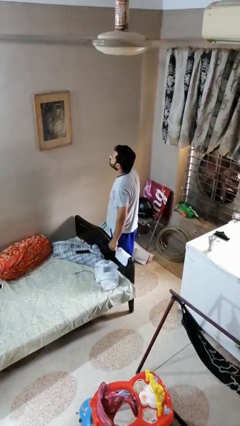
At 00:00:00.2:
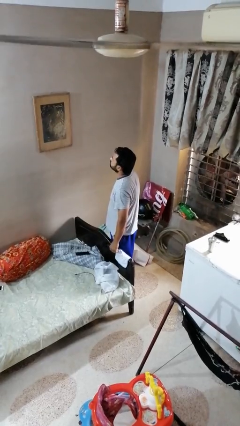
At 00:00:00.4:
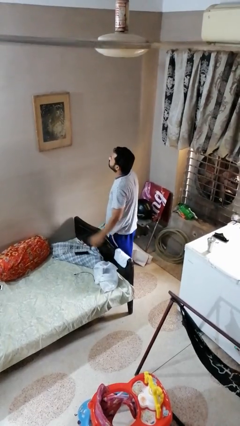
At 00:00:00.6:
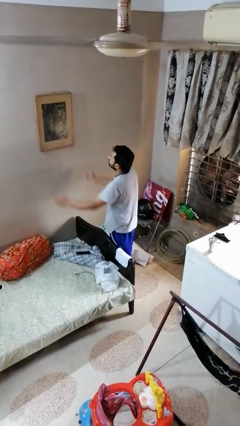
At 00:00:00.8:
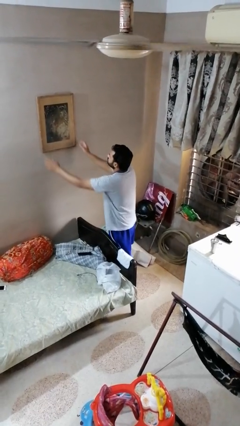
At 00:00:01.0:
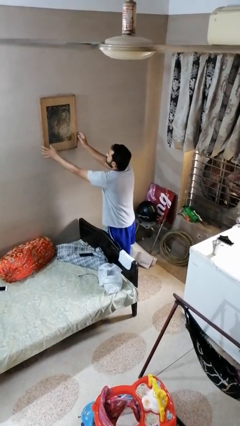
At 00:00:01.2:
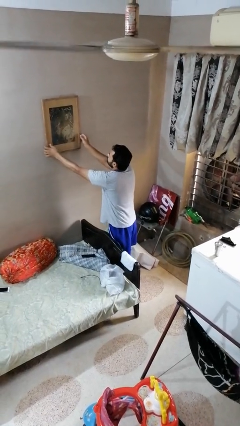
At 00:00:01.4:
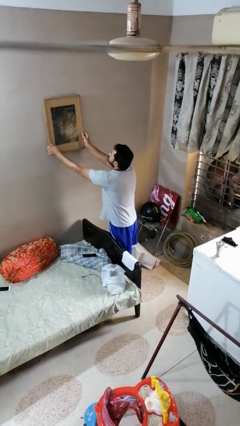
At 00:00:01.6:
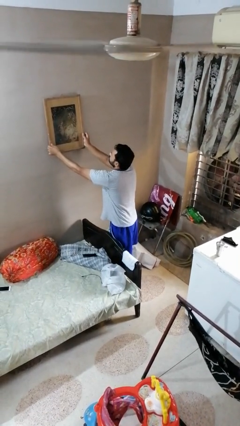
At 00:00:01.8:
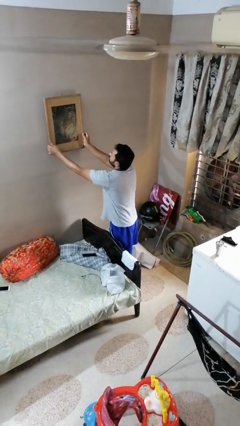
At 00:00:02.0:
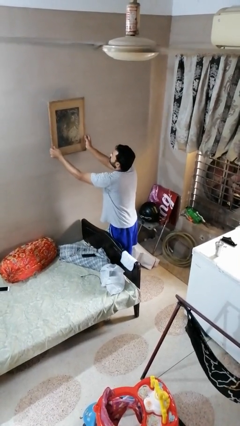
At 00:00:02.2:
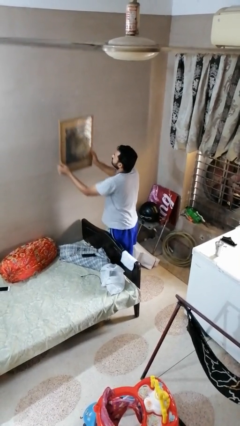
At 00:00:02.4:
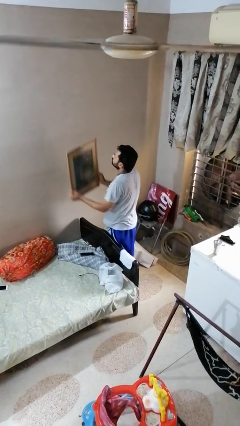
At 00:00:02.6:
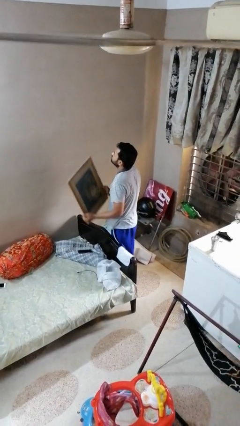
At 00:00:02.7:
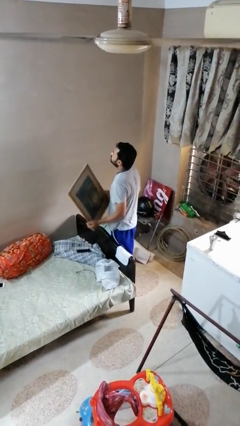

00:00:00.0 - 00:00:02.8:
person takes down picture frame

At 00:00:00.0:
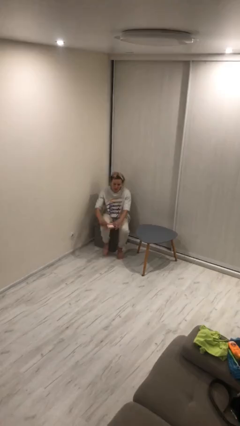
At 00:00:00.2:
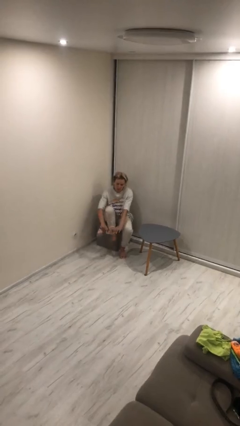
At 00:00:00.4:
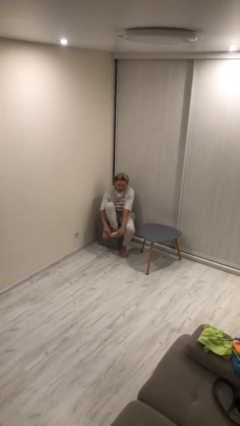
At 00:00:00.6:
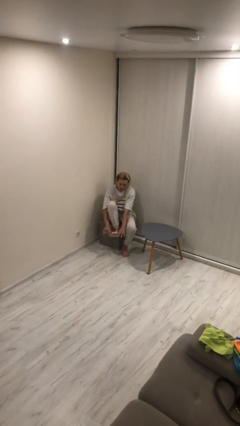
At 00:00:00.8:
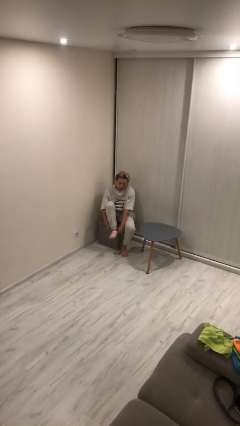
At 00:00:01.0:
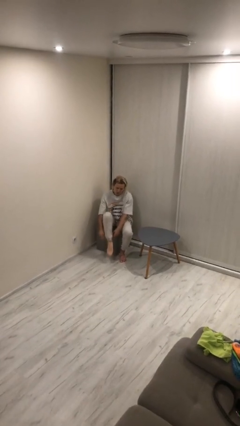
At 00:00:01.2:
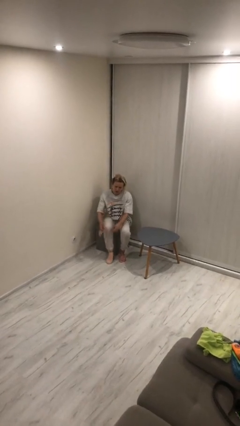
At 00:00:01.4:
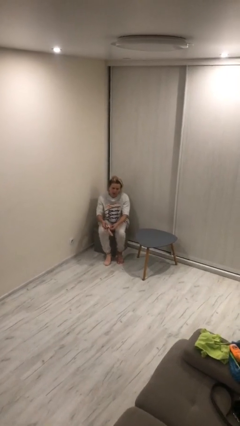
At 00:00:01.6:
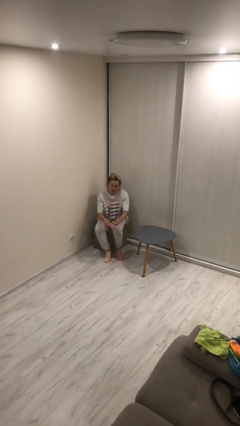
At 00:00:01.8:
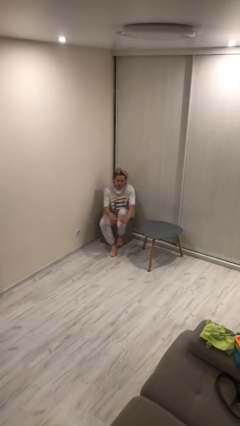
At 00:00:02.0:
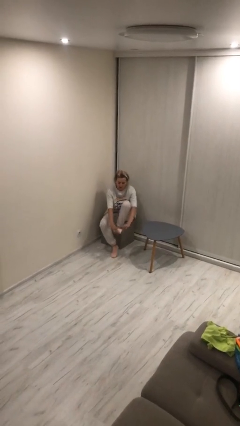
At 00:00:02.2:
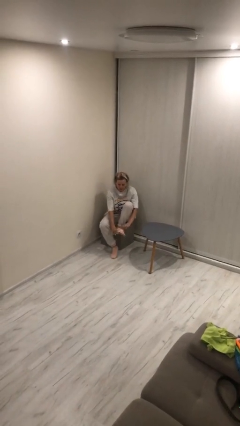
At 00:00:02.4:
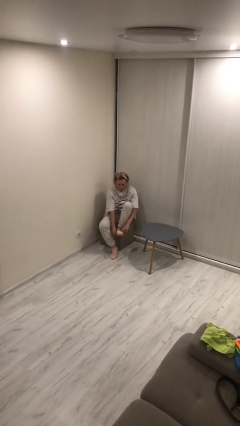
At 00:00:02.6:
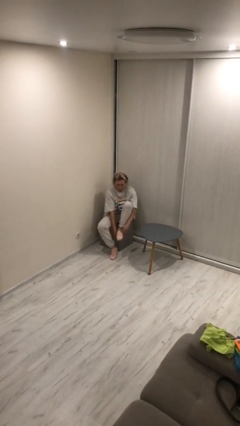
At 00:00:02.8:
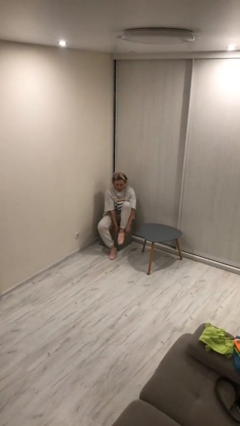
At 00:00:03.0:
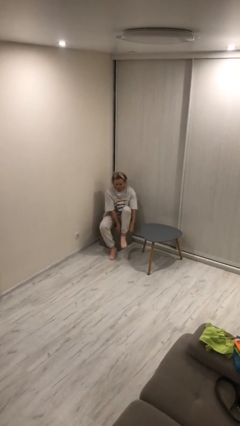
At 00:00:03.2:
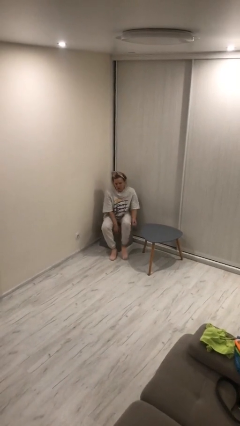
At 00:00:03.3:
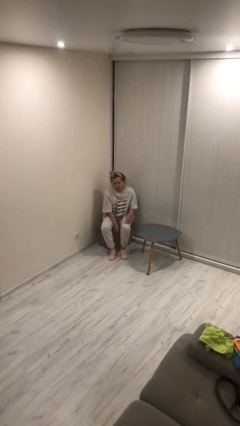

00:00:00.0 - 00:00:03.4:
person puts on socks

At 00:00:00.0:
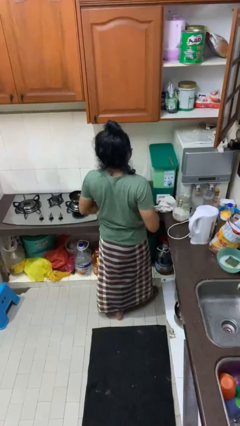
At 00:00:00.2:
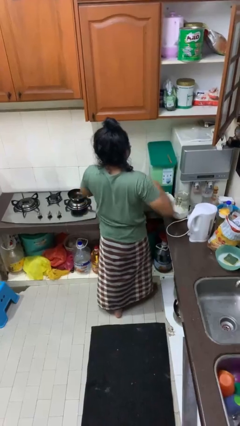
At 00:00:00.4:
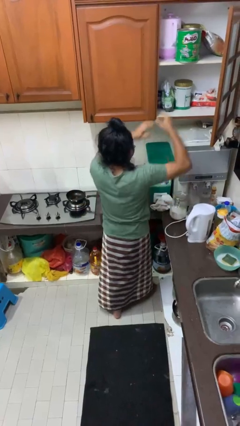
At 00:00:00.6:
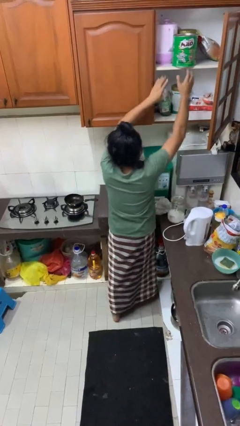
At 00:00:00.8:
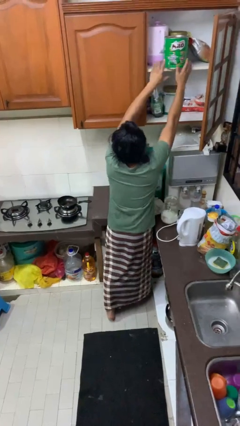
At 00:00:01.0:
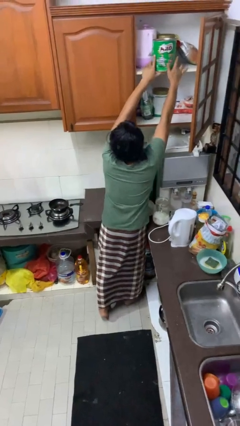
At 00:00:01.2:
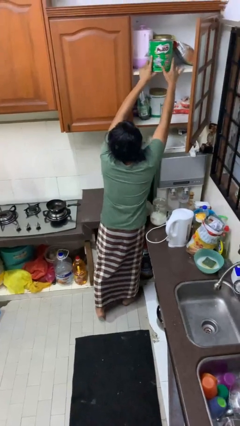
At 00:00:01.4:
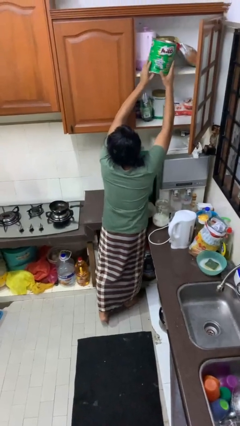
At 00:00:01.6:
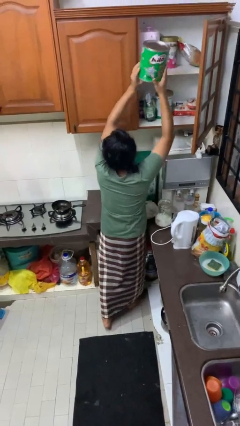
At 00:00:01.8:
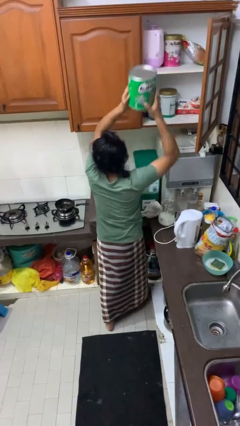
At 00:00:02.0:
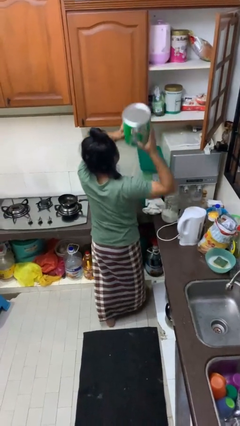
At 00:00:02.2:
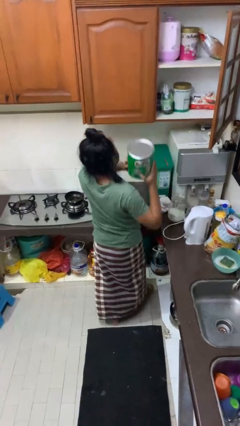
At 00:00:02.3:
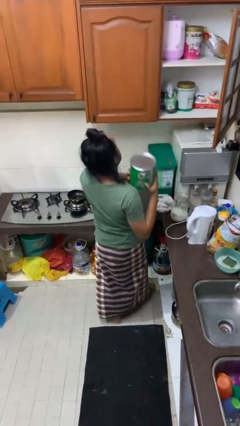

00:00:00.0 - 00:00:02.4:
person takes object from cabinet

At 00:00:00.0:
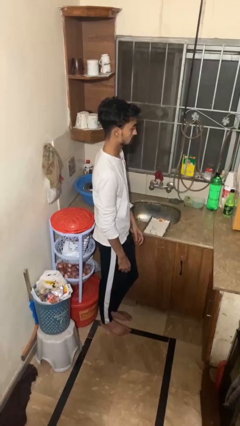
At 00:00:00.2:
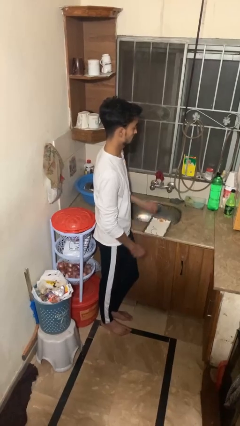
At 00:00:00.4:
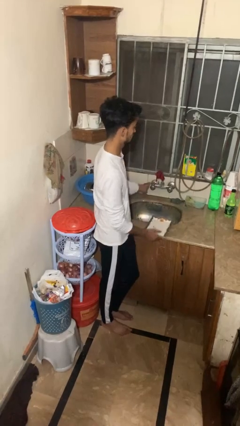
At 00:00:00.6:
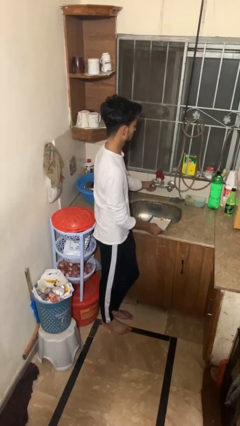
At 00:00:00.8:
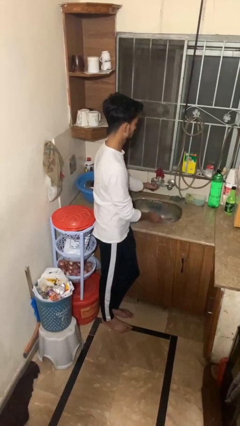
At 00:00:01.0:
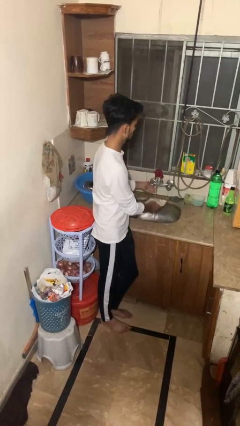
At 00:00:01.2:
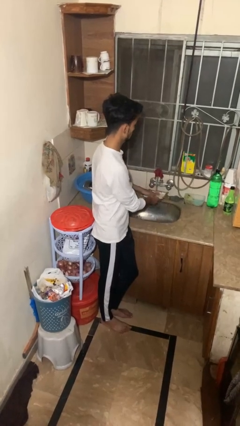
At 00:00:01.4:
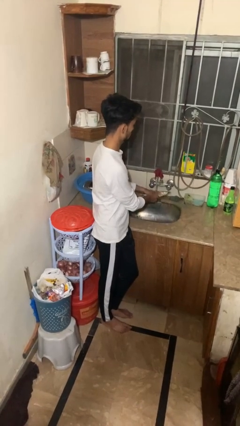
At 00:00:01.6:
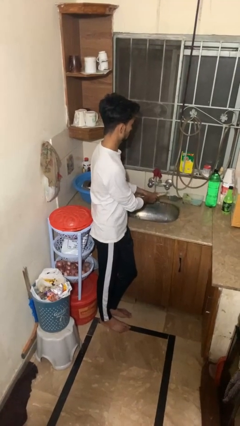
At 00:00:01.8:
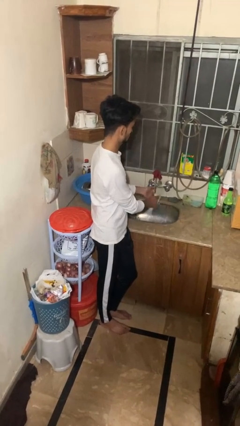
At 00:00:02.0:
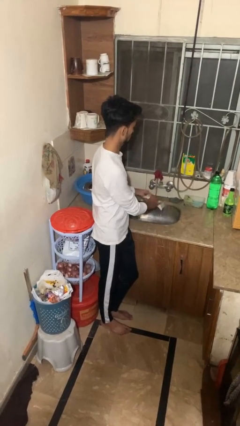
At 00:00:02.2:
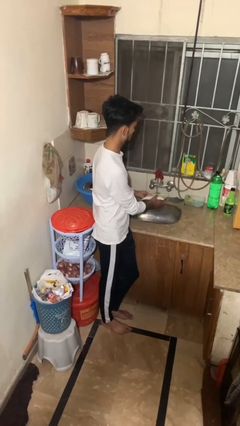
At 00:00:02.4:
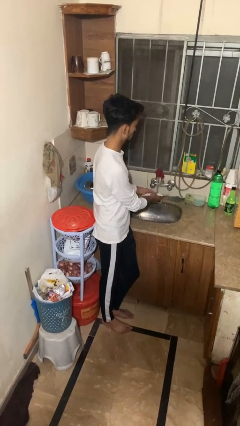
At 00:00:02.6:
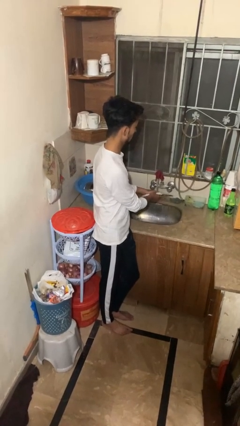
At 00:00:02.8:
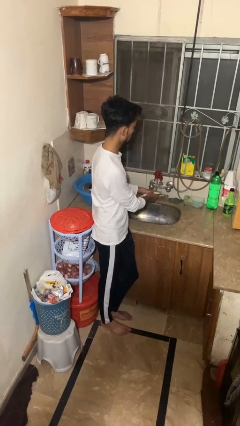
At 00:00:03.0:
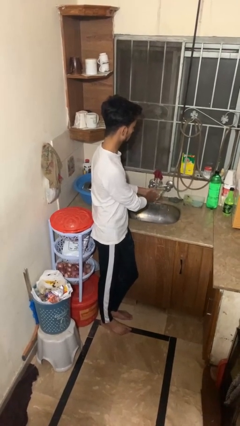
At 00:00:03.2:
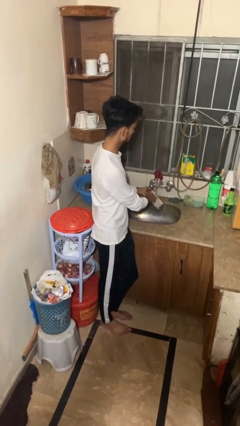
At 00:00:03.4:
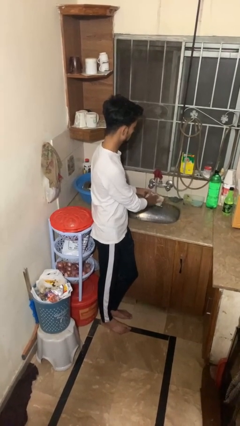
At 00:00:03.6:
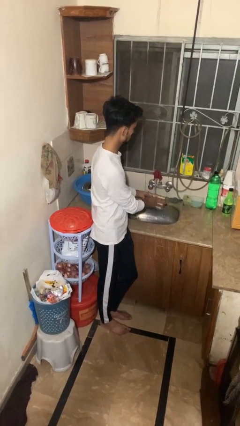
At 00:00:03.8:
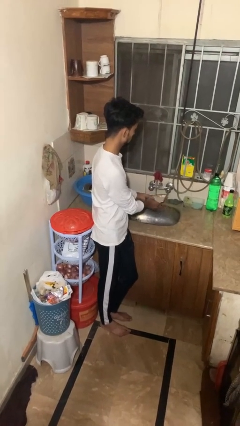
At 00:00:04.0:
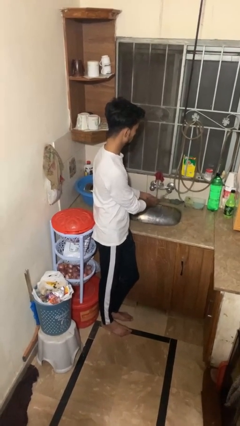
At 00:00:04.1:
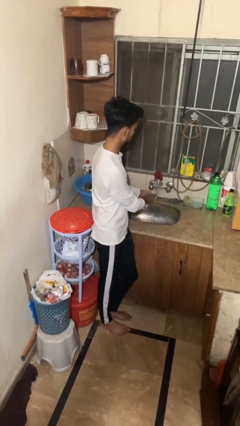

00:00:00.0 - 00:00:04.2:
person opens dishwasher

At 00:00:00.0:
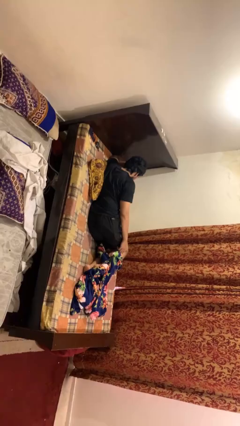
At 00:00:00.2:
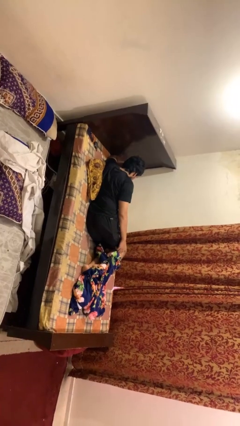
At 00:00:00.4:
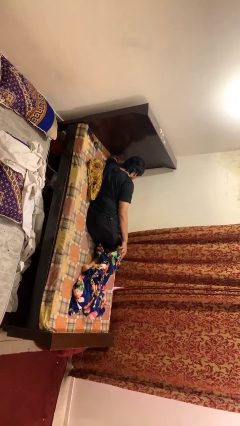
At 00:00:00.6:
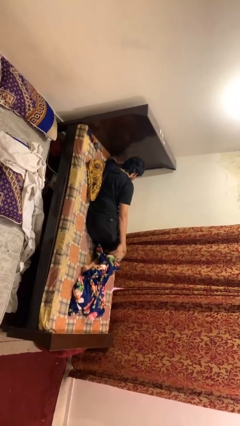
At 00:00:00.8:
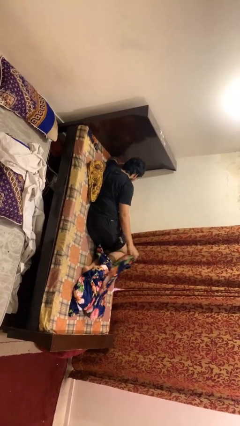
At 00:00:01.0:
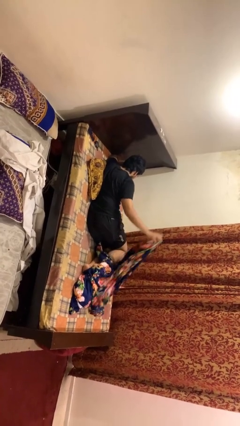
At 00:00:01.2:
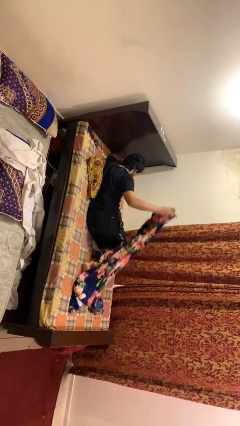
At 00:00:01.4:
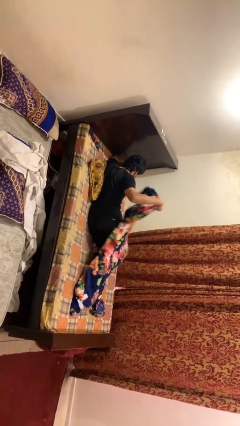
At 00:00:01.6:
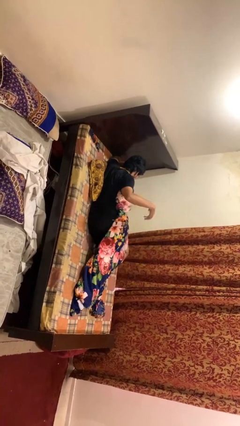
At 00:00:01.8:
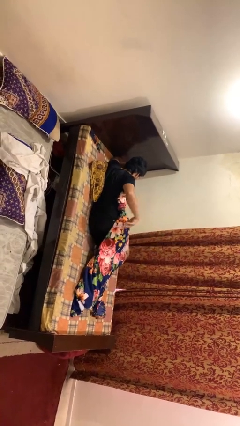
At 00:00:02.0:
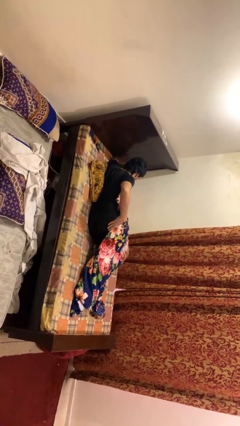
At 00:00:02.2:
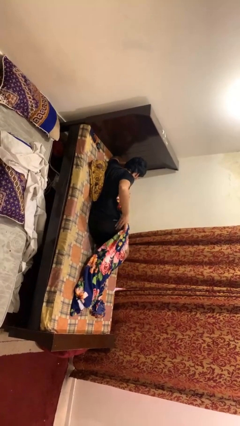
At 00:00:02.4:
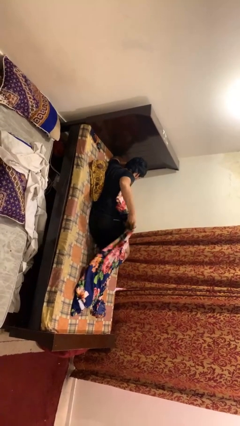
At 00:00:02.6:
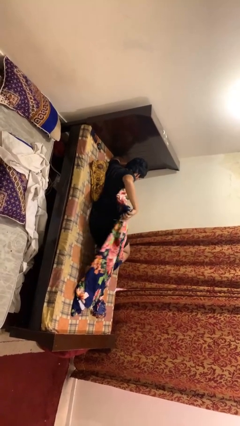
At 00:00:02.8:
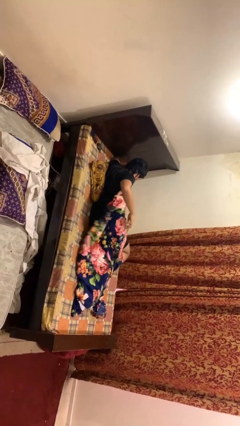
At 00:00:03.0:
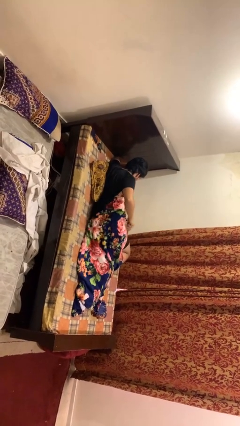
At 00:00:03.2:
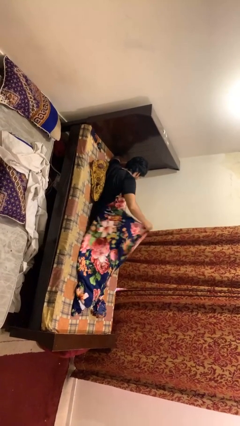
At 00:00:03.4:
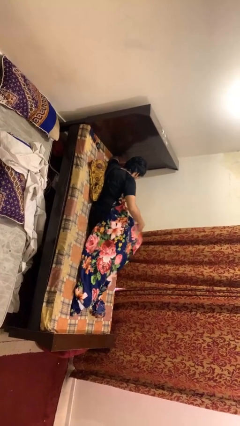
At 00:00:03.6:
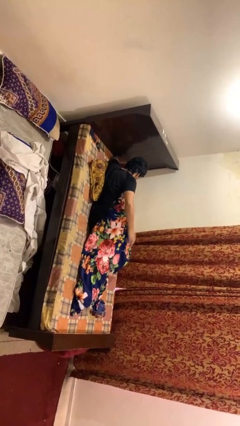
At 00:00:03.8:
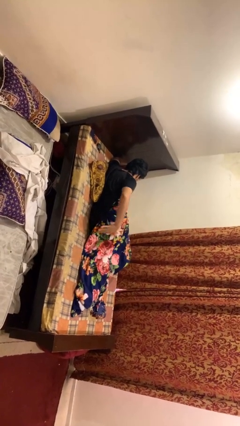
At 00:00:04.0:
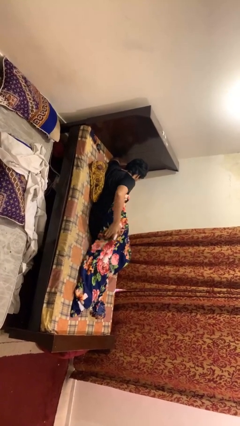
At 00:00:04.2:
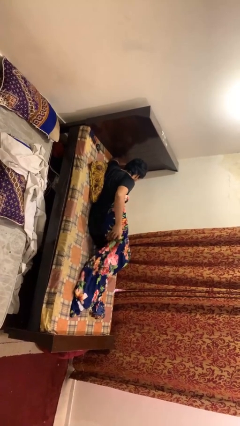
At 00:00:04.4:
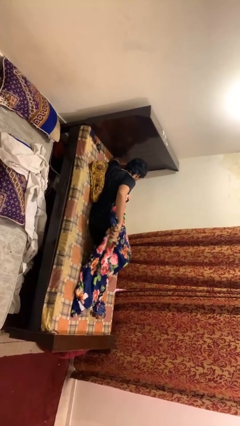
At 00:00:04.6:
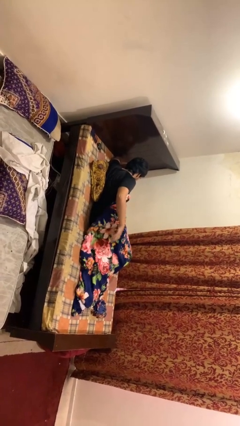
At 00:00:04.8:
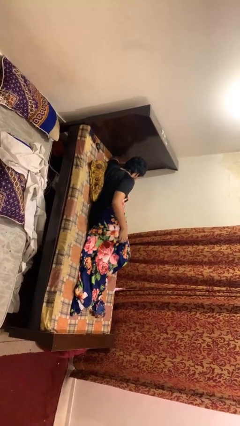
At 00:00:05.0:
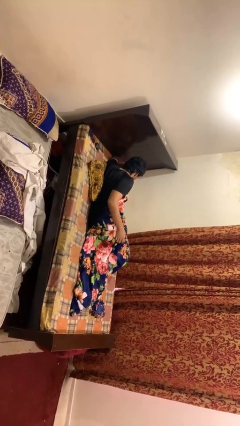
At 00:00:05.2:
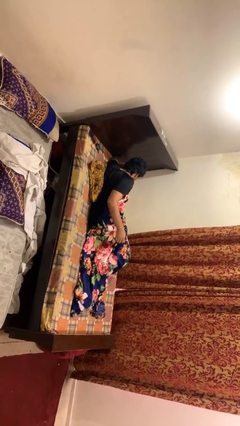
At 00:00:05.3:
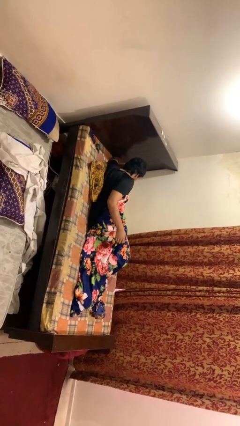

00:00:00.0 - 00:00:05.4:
person covers with blanket
